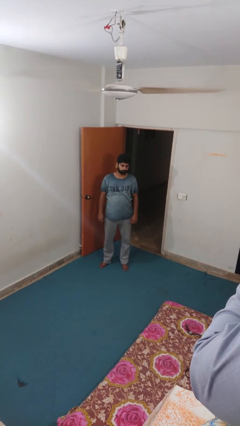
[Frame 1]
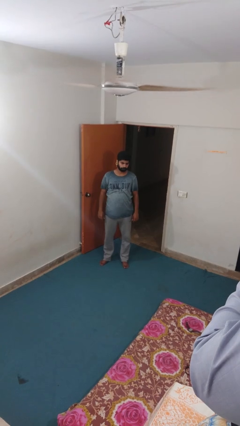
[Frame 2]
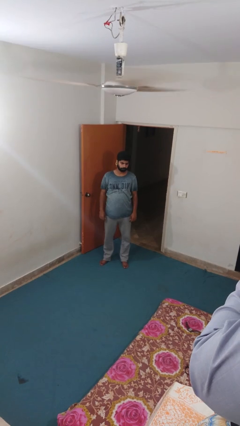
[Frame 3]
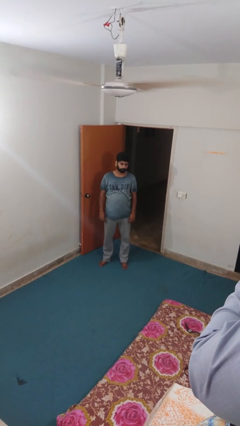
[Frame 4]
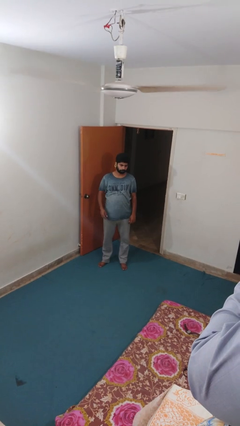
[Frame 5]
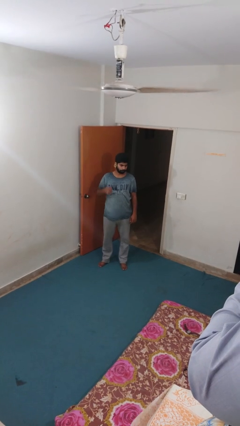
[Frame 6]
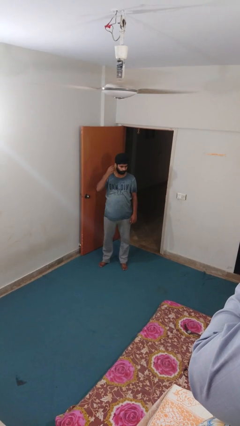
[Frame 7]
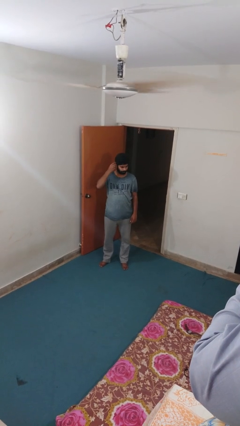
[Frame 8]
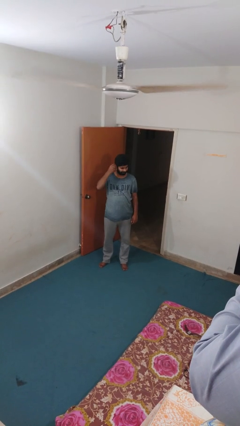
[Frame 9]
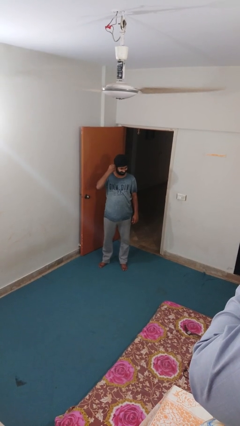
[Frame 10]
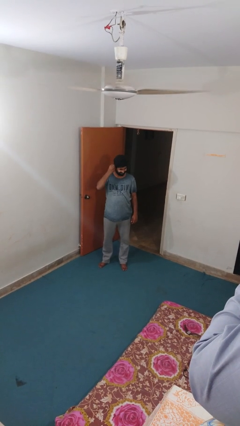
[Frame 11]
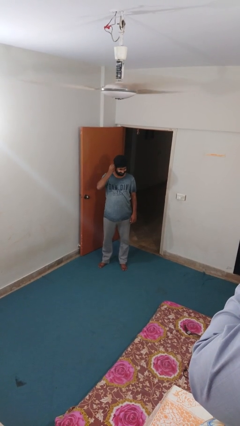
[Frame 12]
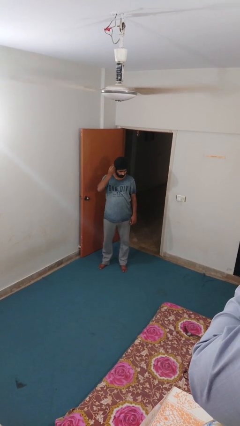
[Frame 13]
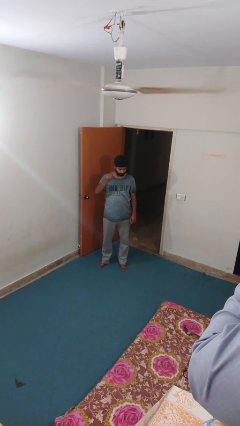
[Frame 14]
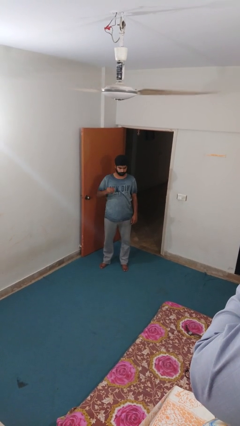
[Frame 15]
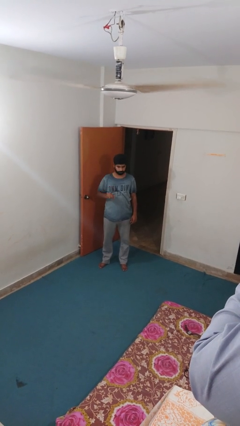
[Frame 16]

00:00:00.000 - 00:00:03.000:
person takes off earrings

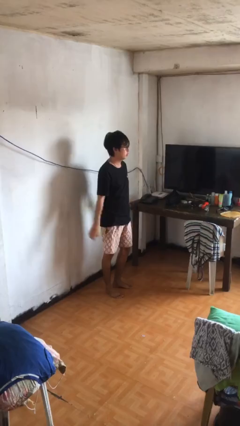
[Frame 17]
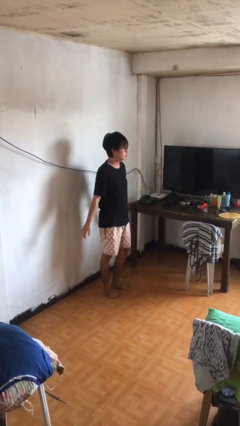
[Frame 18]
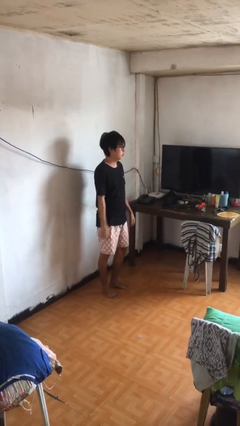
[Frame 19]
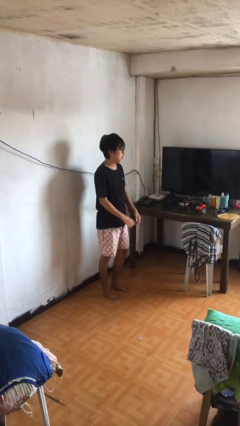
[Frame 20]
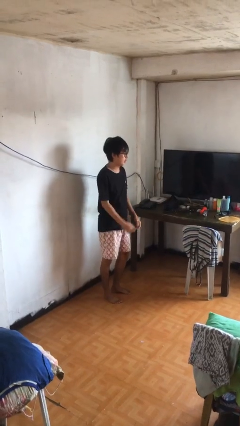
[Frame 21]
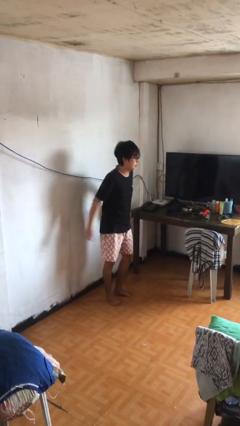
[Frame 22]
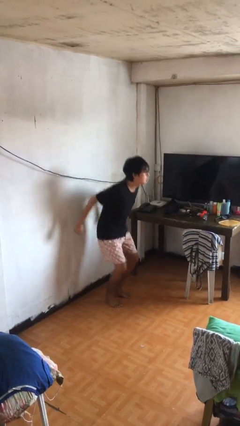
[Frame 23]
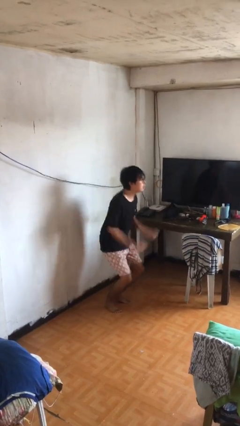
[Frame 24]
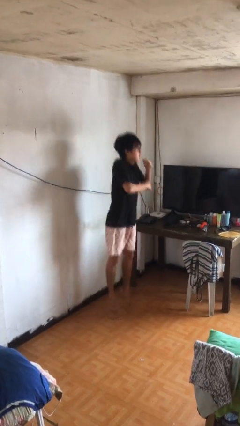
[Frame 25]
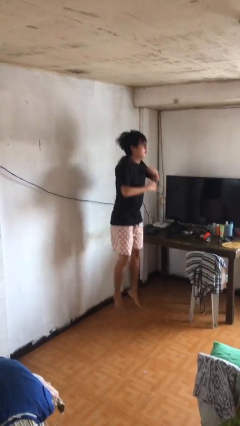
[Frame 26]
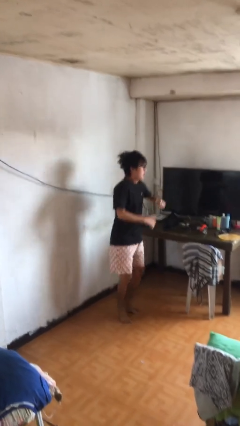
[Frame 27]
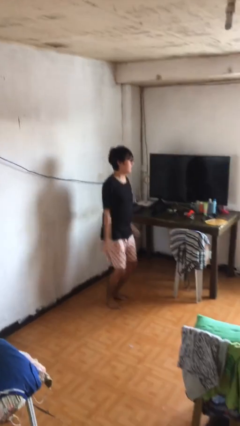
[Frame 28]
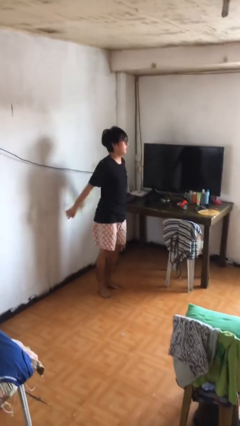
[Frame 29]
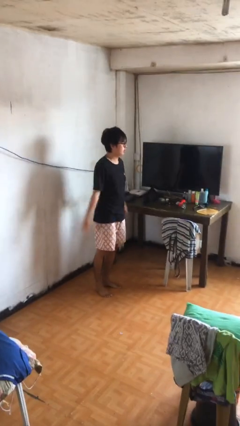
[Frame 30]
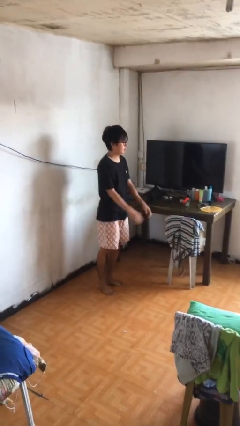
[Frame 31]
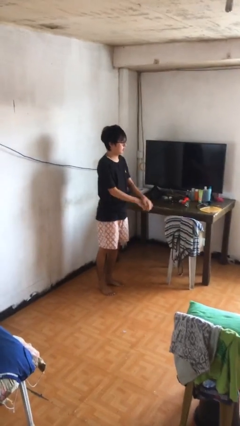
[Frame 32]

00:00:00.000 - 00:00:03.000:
person jumps

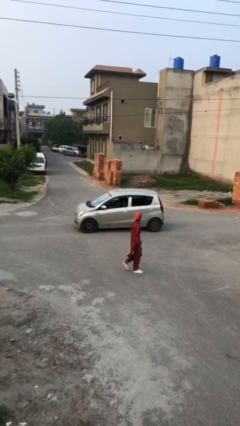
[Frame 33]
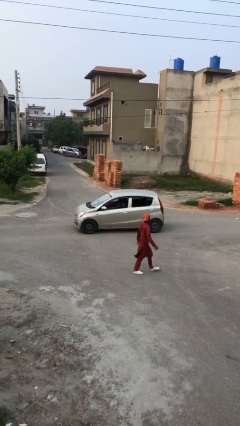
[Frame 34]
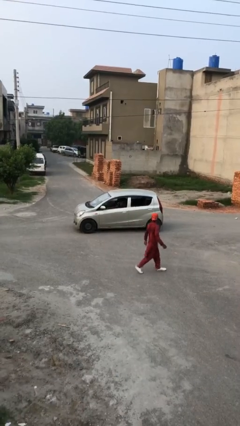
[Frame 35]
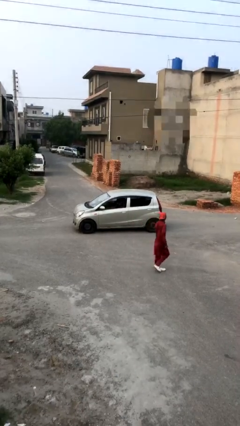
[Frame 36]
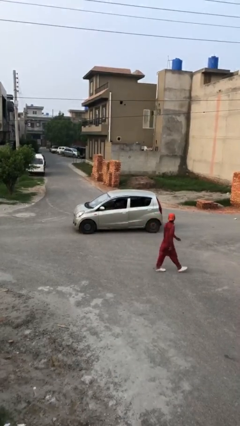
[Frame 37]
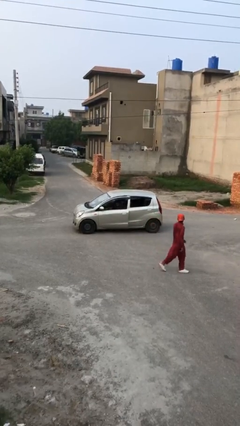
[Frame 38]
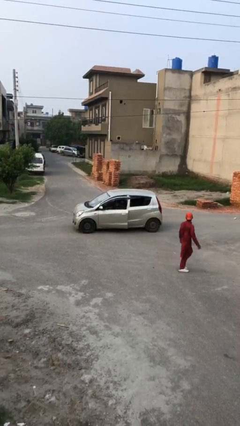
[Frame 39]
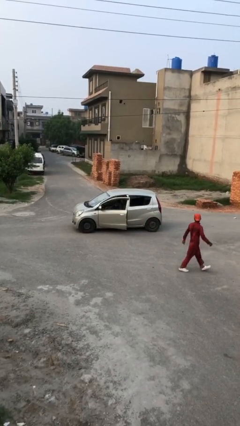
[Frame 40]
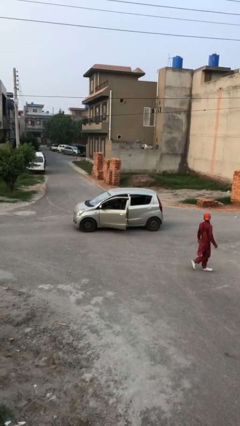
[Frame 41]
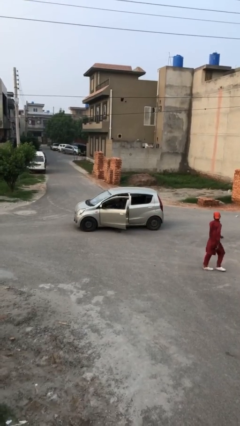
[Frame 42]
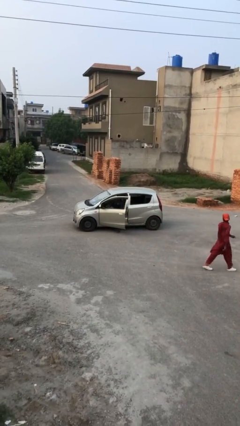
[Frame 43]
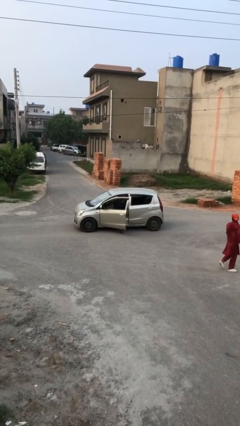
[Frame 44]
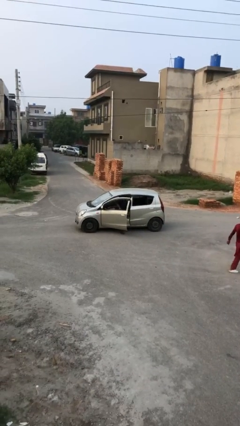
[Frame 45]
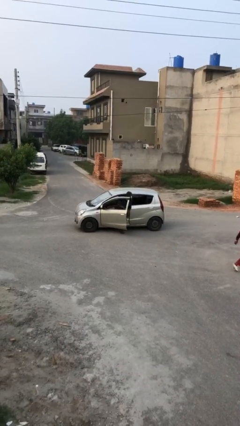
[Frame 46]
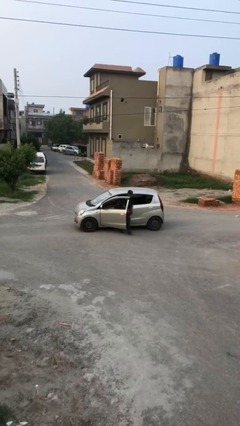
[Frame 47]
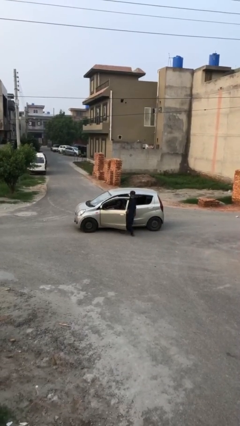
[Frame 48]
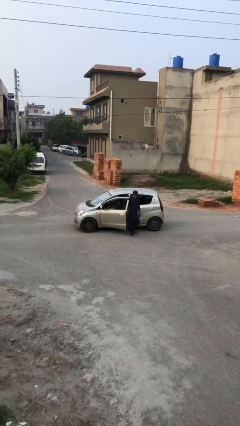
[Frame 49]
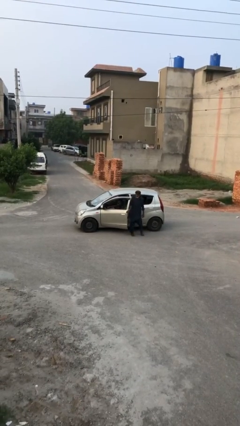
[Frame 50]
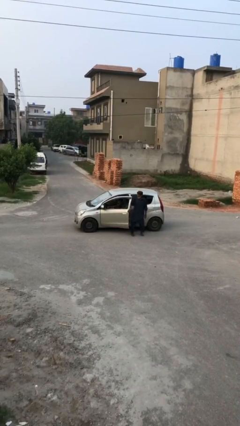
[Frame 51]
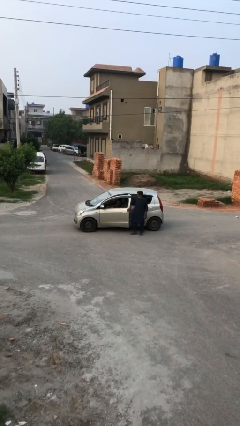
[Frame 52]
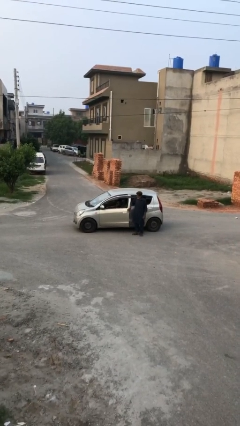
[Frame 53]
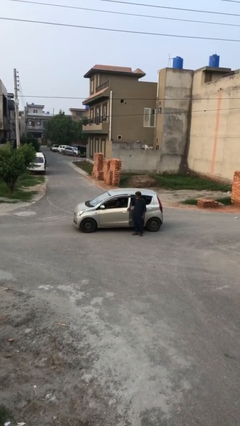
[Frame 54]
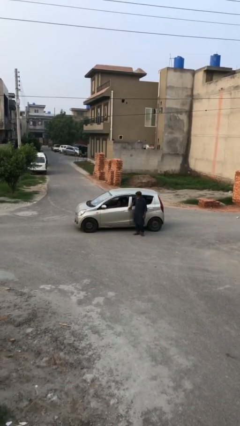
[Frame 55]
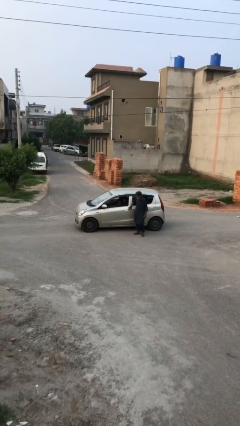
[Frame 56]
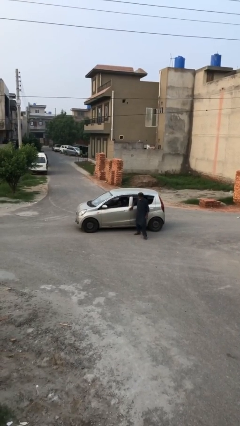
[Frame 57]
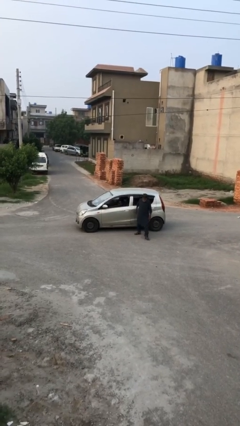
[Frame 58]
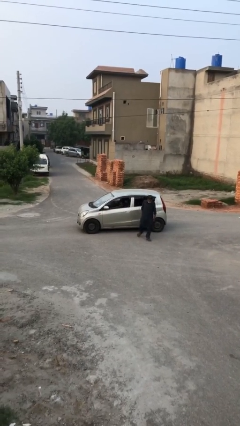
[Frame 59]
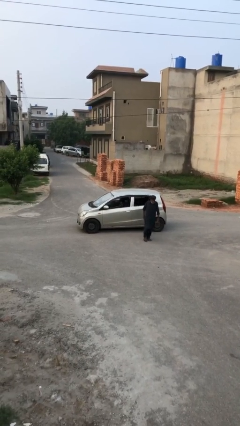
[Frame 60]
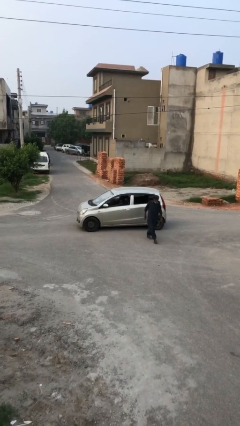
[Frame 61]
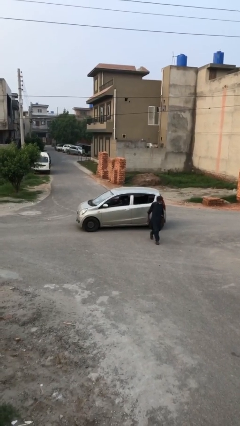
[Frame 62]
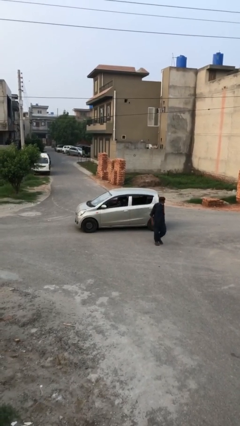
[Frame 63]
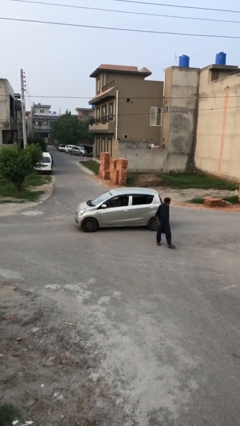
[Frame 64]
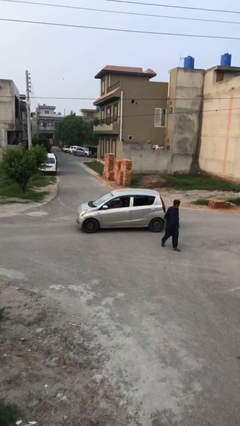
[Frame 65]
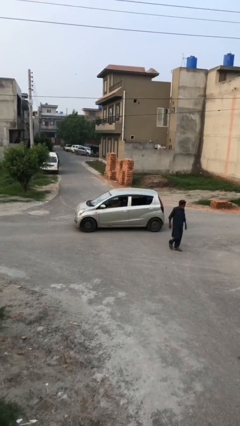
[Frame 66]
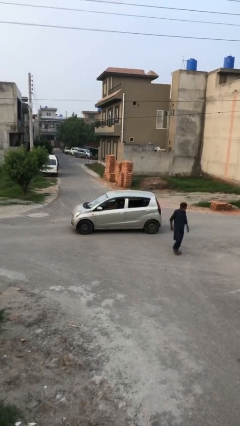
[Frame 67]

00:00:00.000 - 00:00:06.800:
car drops off person

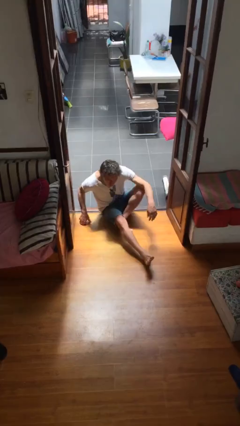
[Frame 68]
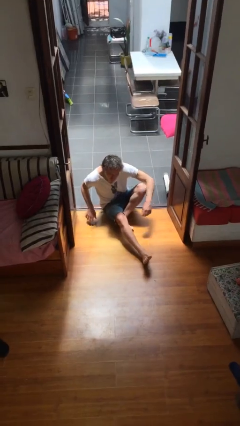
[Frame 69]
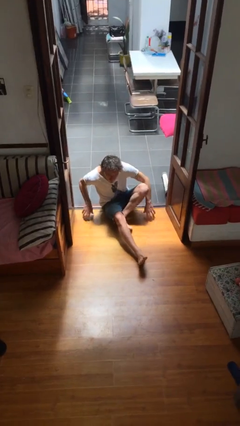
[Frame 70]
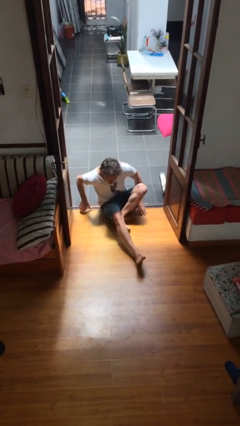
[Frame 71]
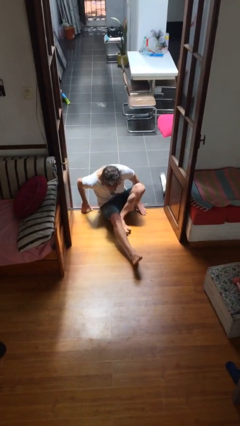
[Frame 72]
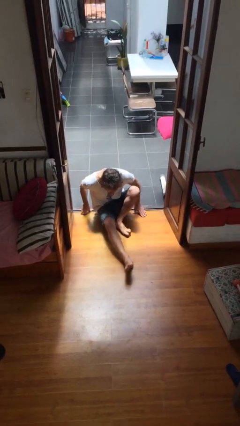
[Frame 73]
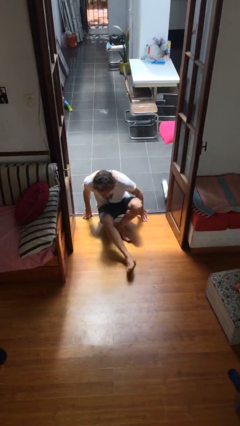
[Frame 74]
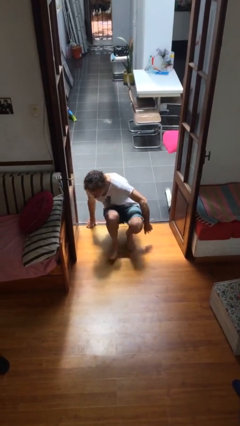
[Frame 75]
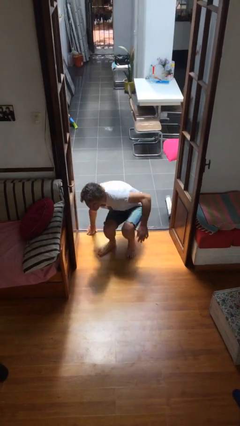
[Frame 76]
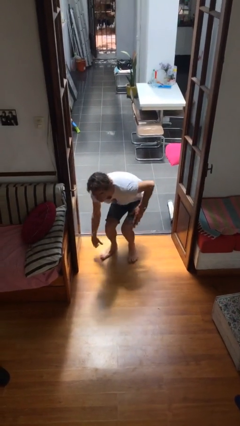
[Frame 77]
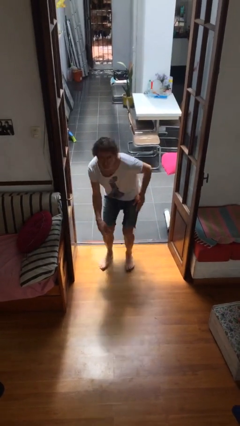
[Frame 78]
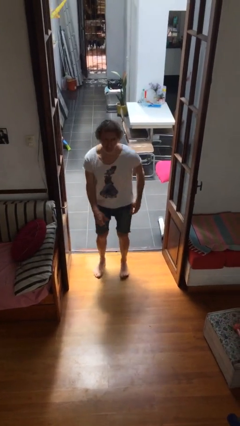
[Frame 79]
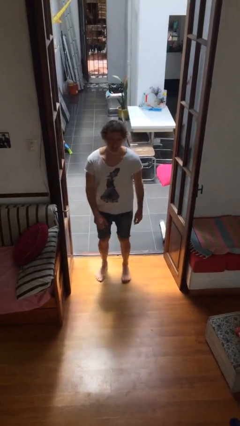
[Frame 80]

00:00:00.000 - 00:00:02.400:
person stands up

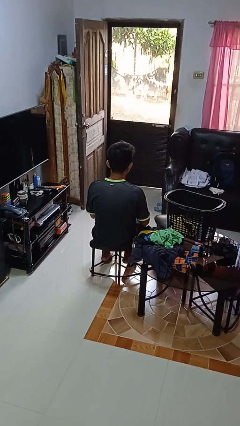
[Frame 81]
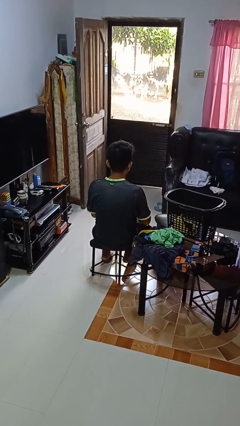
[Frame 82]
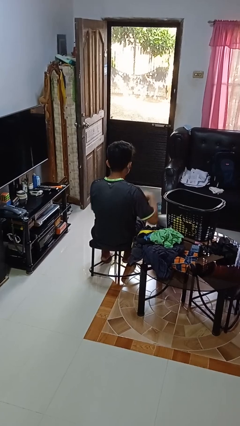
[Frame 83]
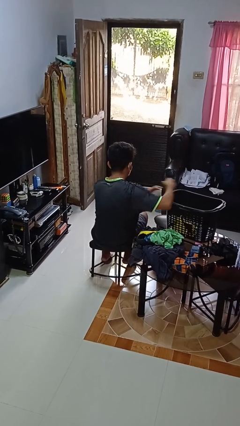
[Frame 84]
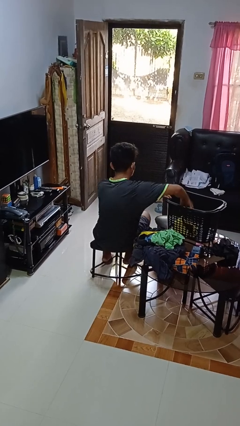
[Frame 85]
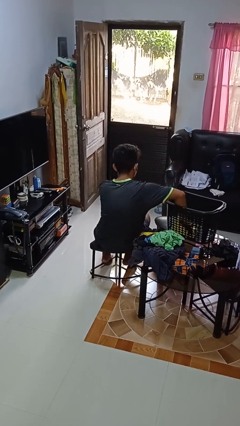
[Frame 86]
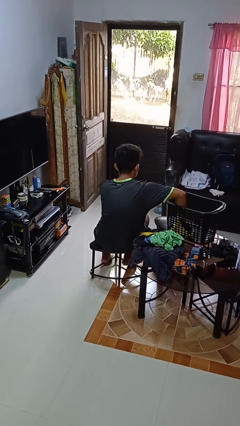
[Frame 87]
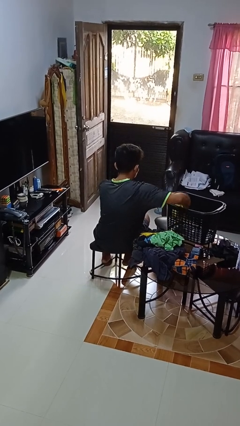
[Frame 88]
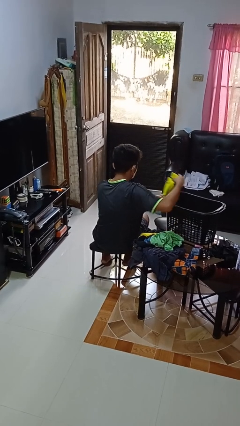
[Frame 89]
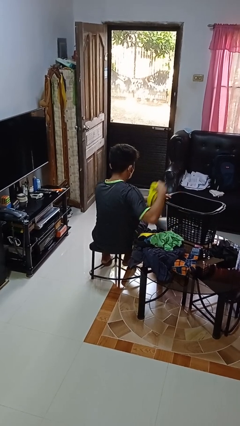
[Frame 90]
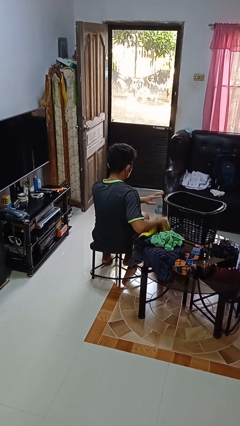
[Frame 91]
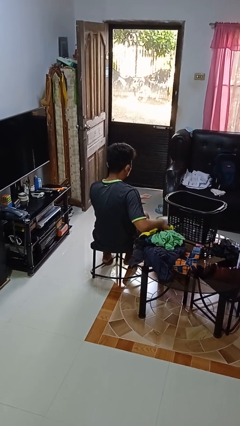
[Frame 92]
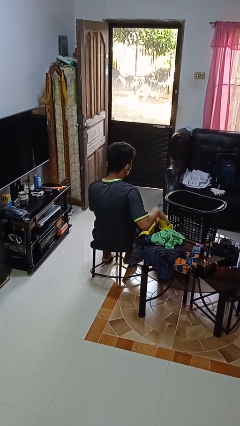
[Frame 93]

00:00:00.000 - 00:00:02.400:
person takes object from basket
